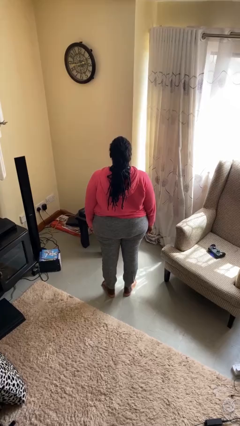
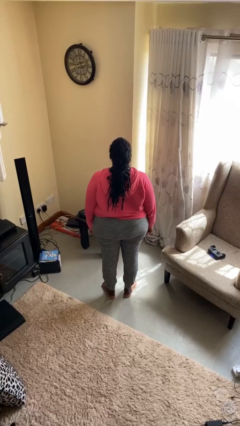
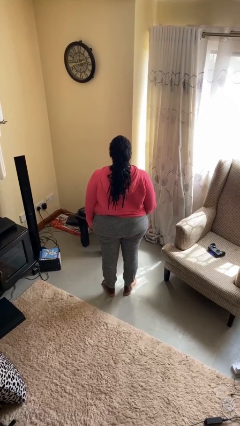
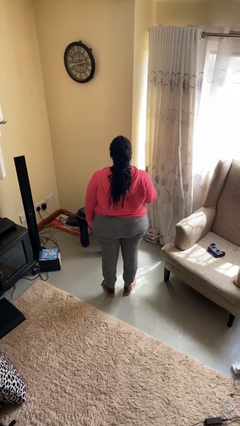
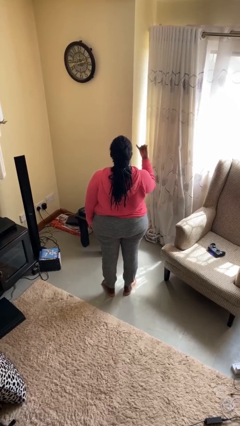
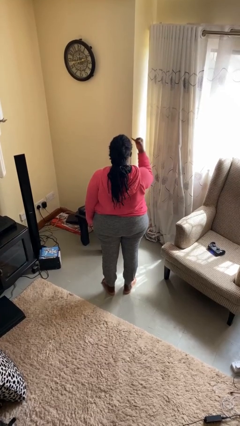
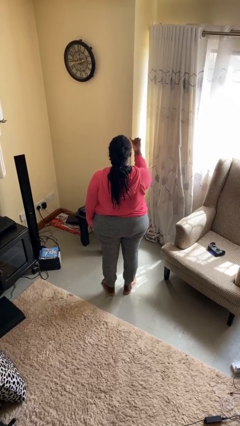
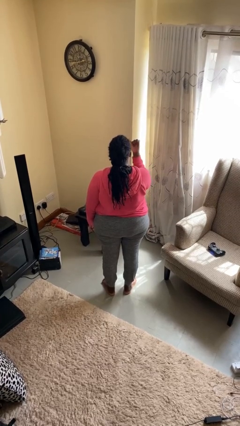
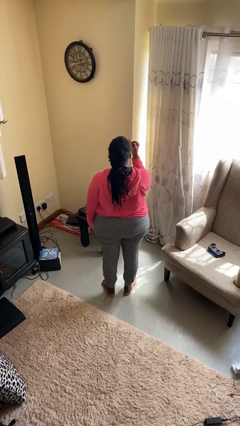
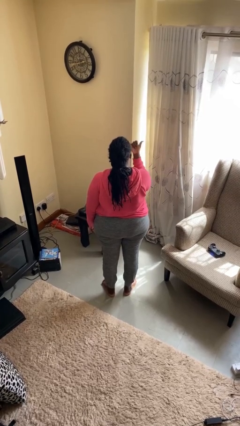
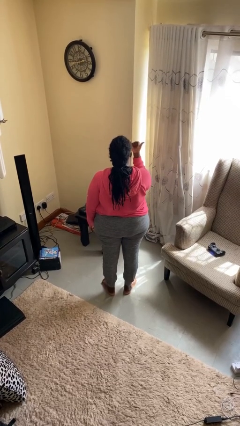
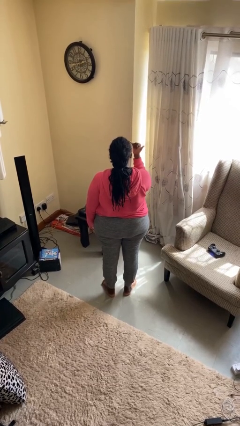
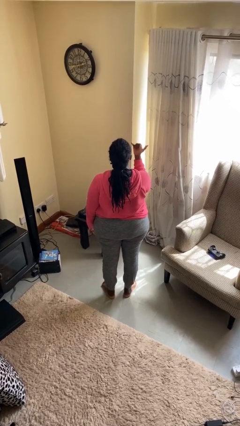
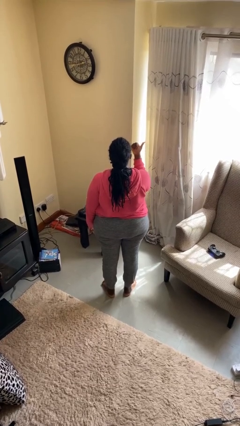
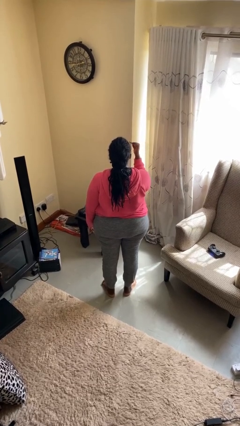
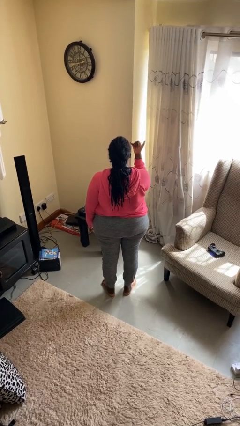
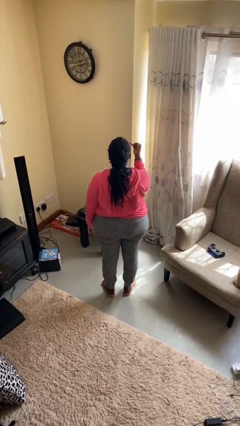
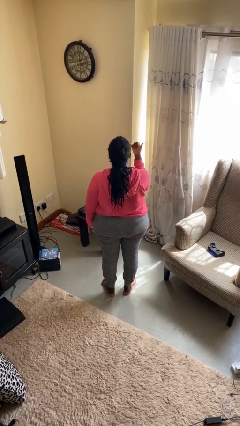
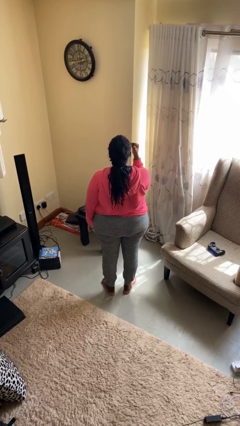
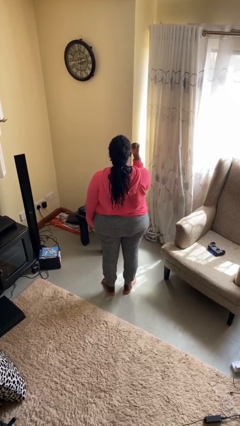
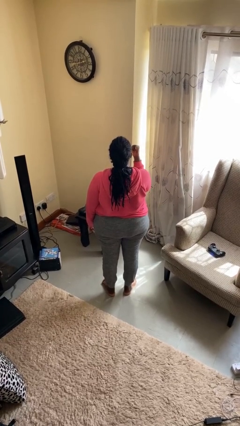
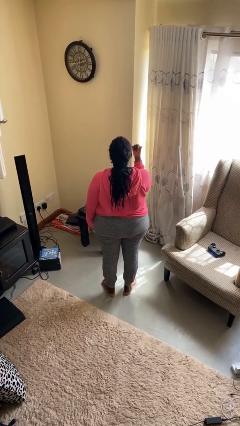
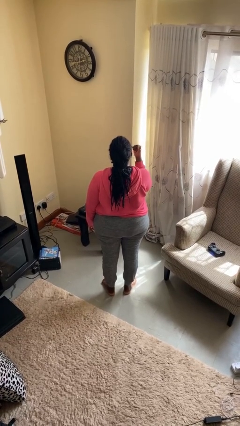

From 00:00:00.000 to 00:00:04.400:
person gestures hang loose

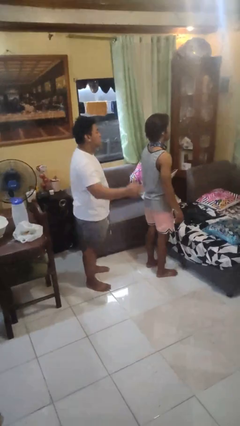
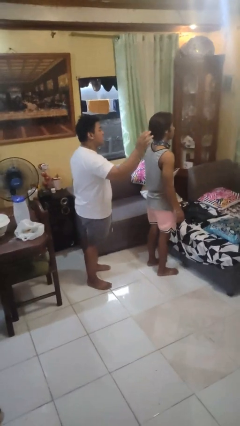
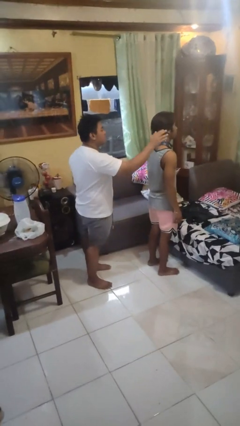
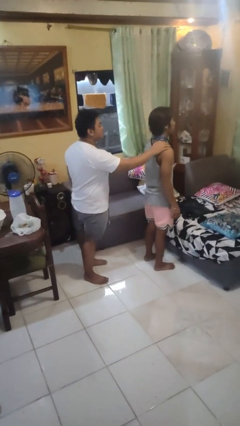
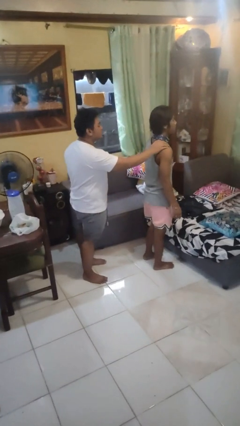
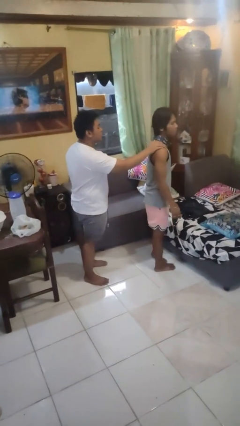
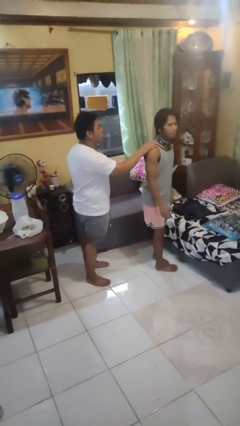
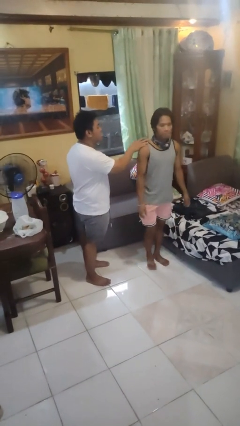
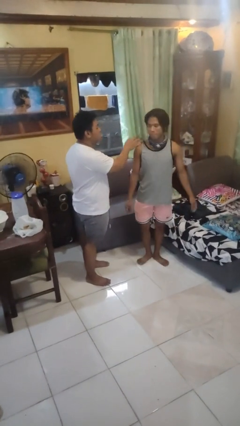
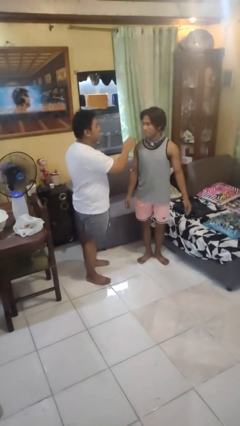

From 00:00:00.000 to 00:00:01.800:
person grabs person by shoulder

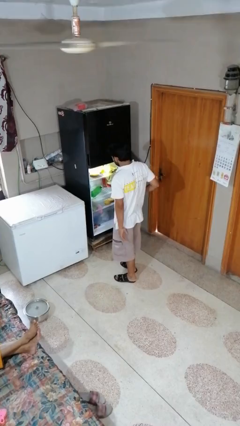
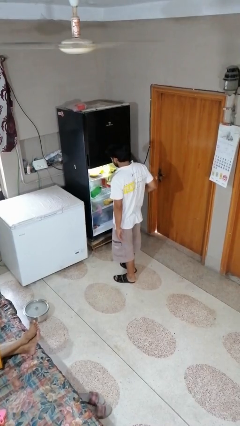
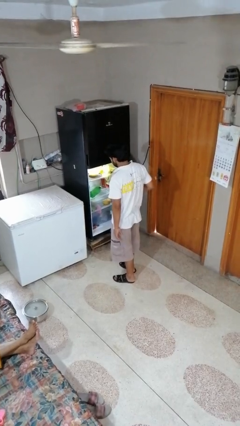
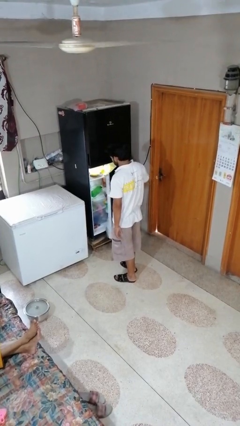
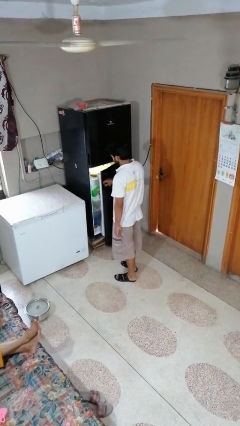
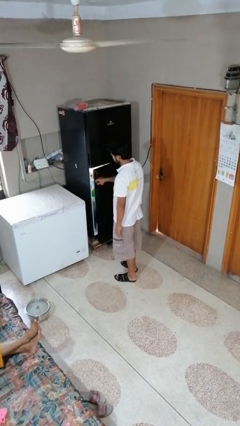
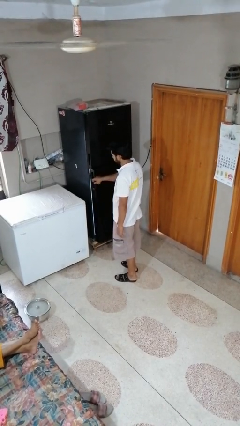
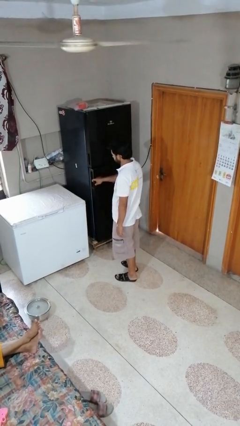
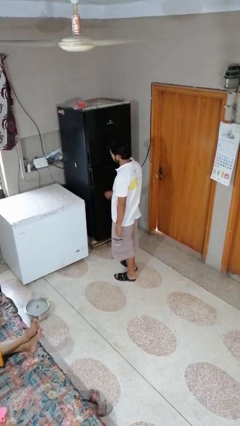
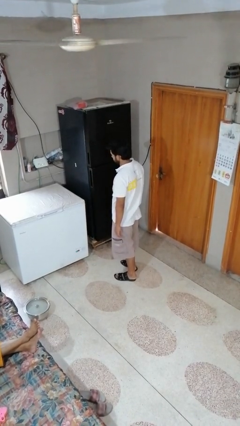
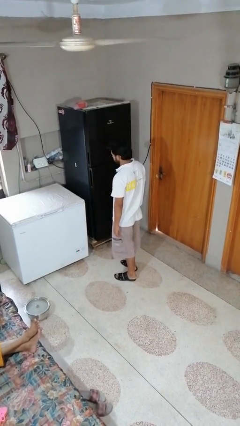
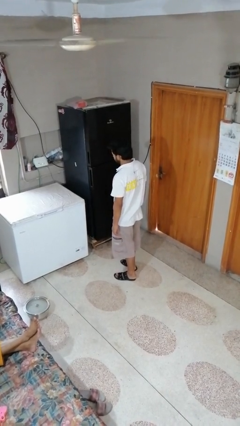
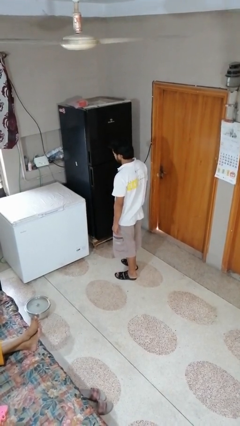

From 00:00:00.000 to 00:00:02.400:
person closes refrigerator

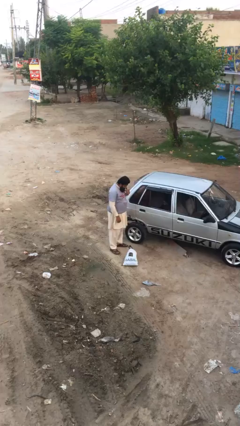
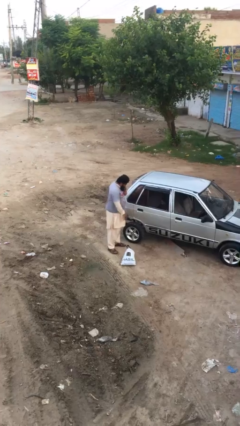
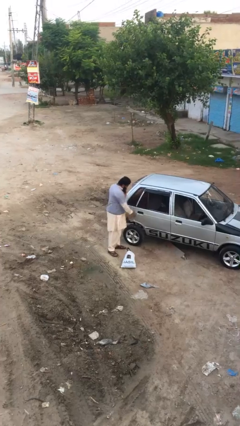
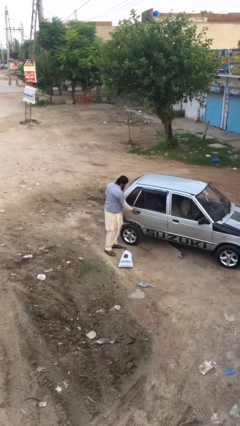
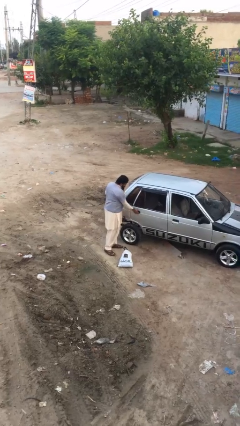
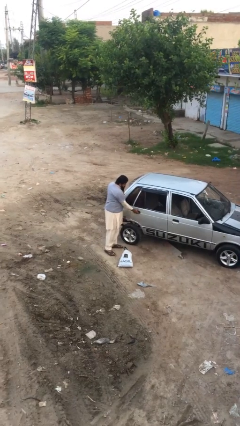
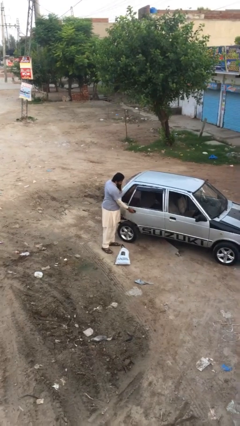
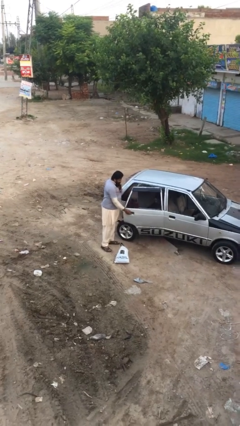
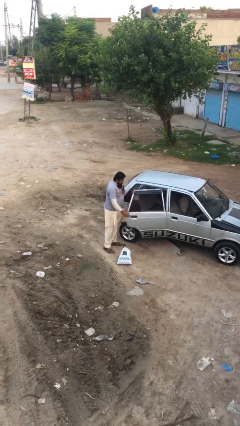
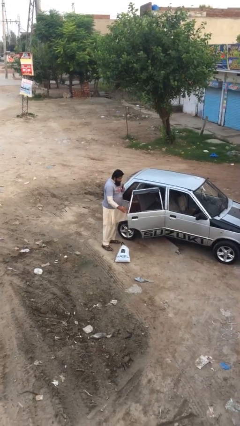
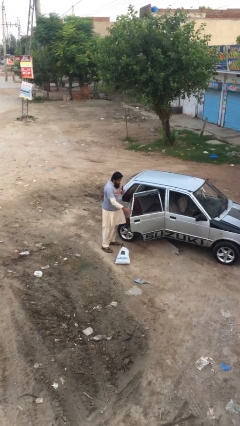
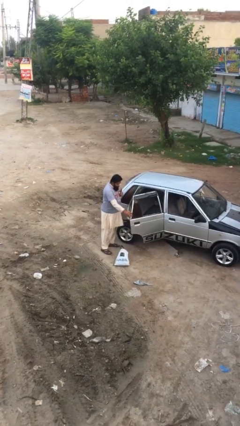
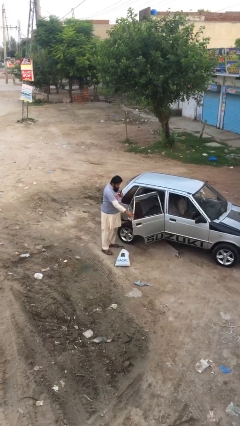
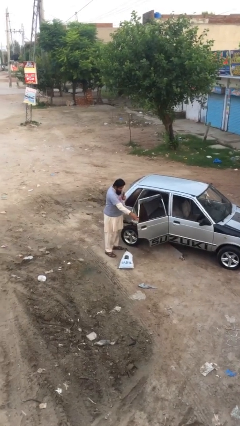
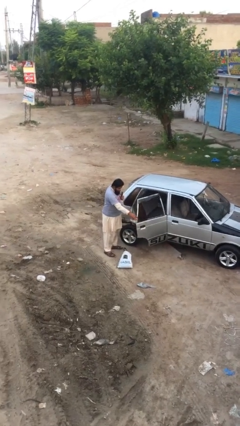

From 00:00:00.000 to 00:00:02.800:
person opens car door

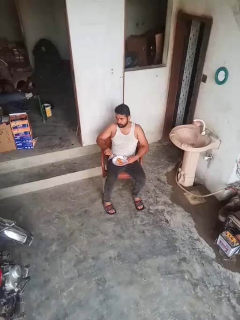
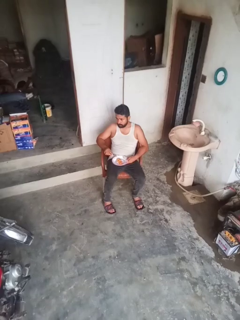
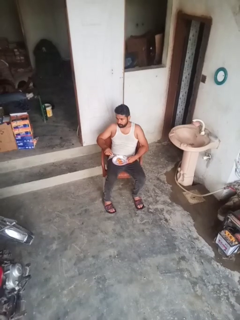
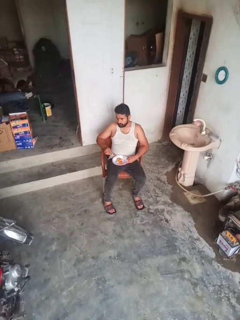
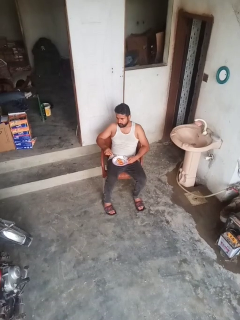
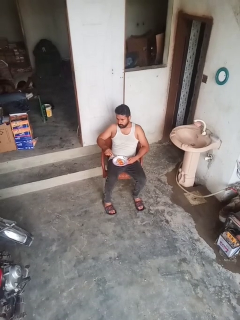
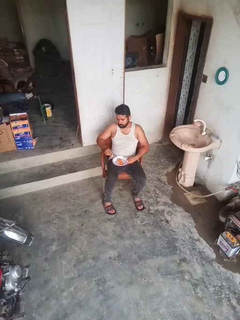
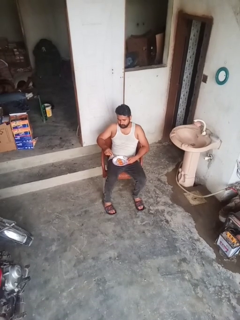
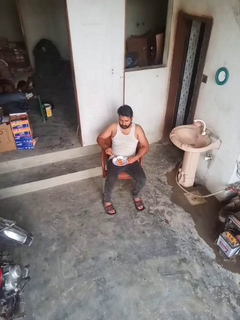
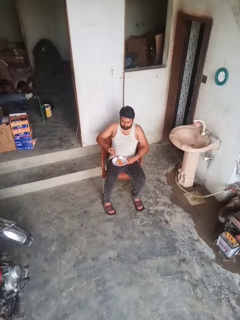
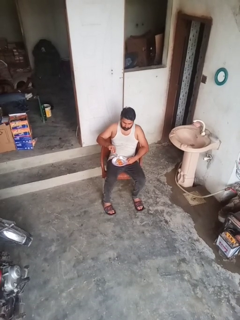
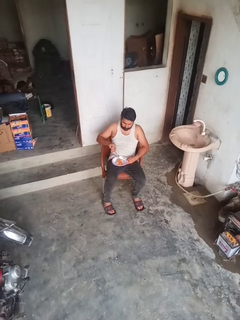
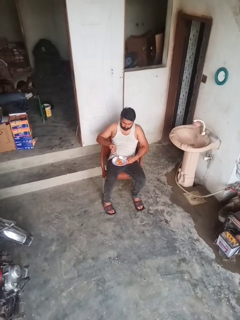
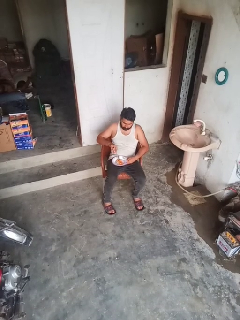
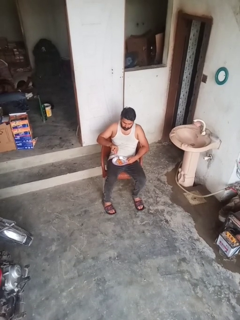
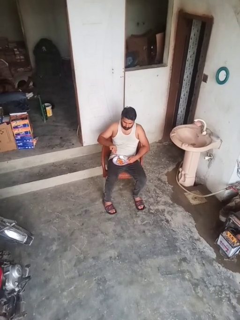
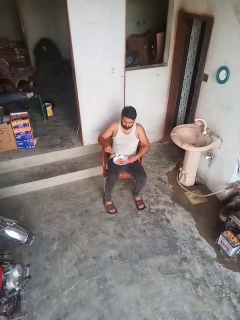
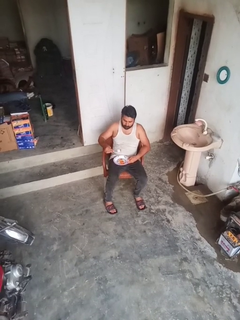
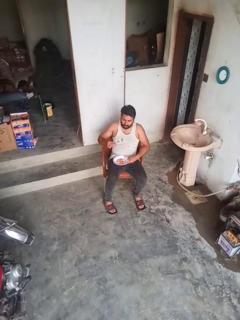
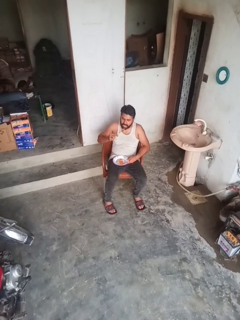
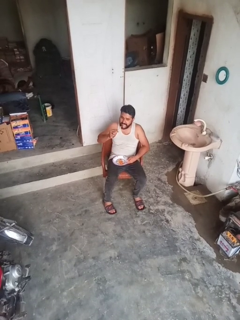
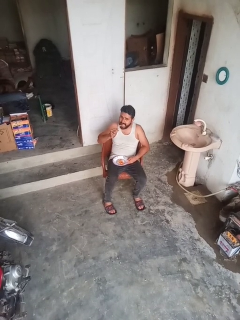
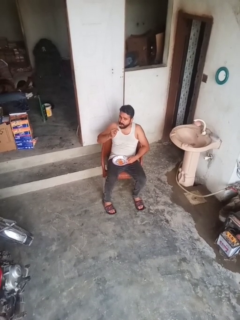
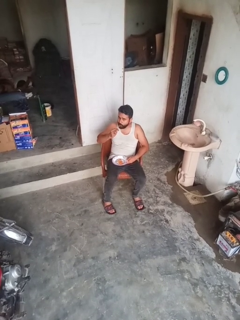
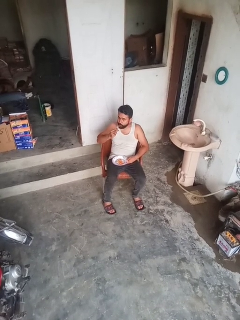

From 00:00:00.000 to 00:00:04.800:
person eats with utensil

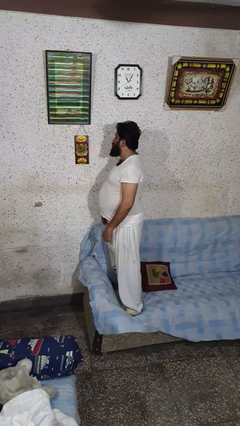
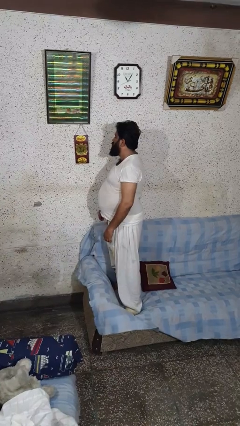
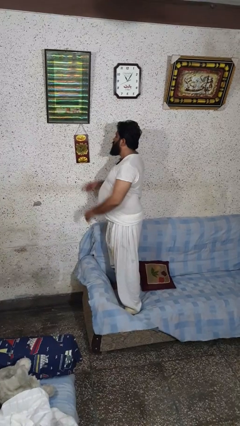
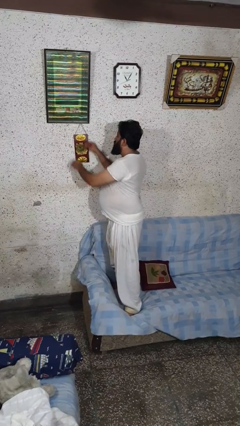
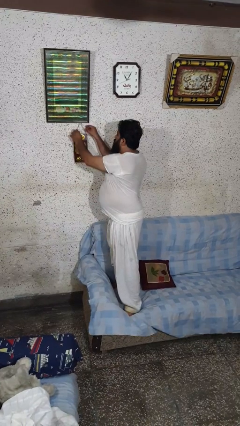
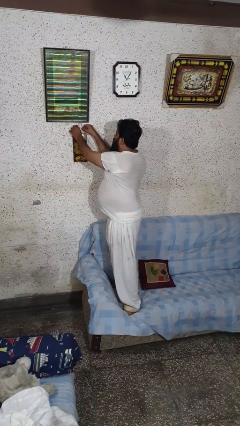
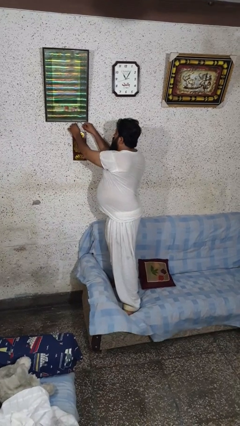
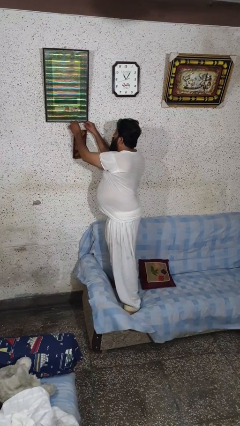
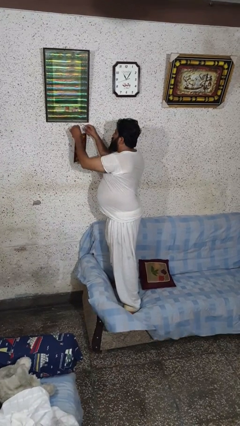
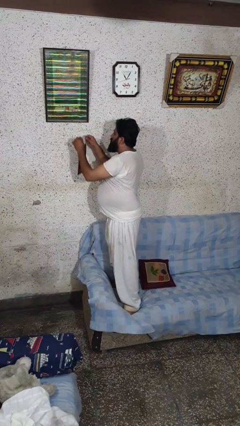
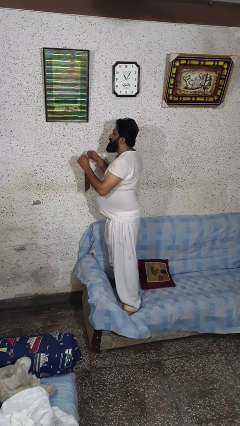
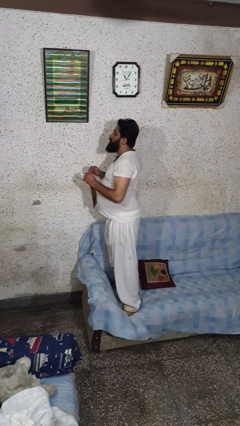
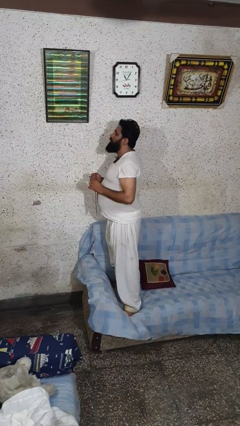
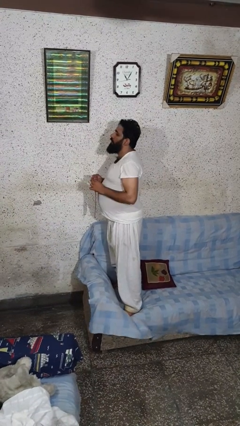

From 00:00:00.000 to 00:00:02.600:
person takes down picture frame
